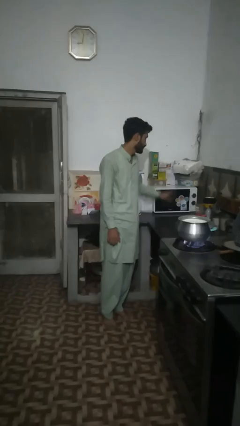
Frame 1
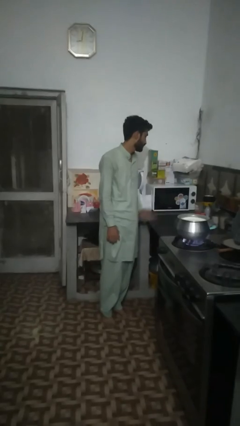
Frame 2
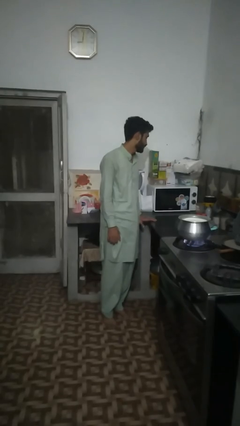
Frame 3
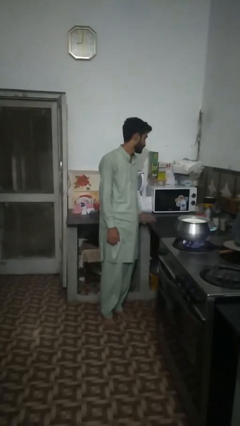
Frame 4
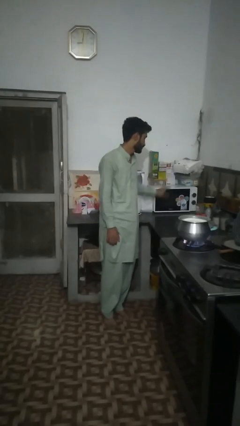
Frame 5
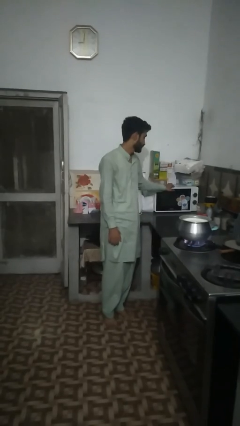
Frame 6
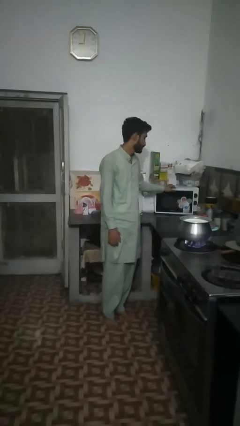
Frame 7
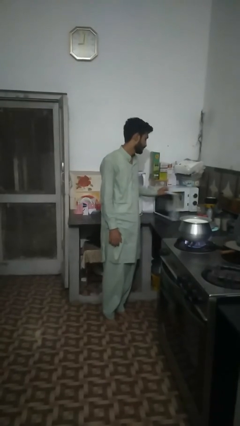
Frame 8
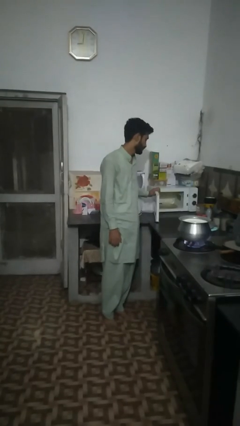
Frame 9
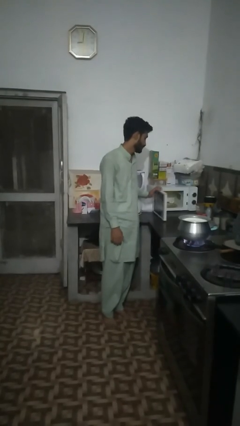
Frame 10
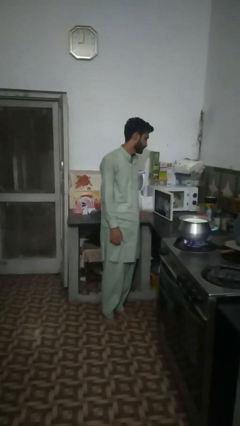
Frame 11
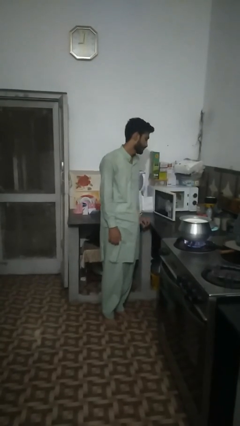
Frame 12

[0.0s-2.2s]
person opens microwave

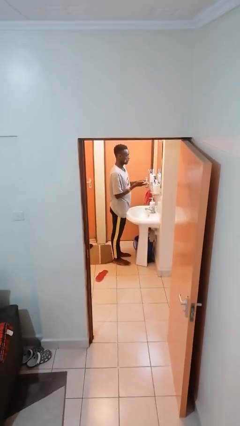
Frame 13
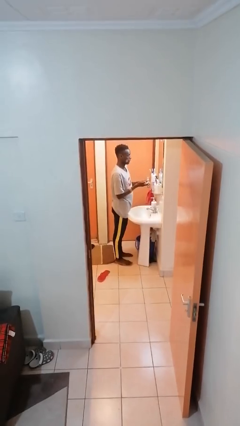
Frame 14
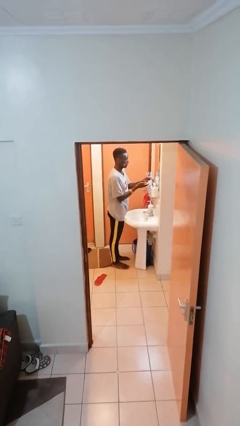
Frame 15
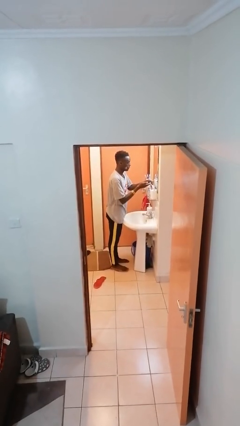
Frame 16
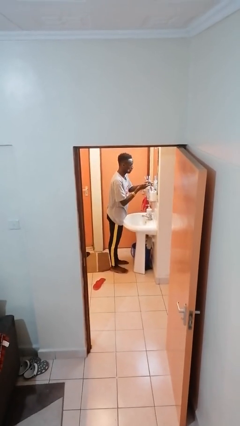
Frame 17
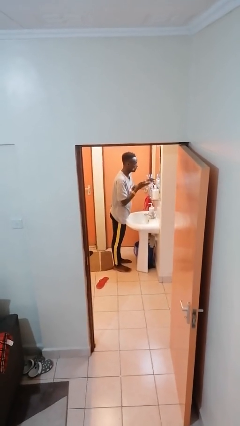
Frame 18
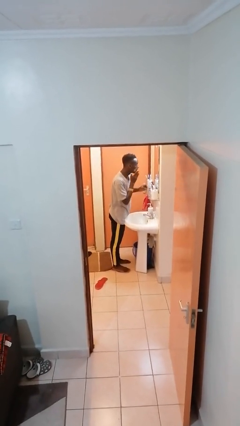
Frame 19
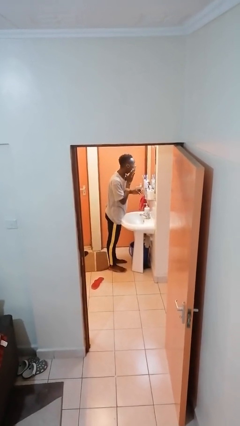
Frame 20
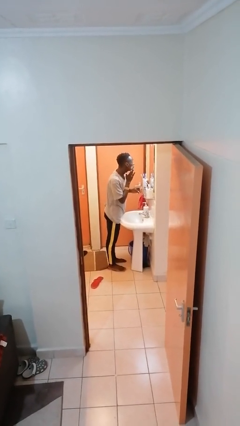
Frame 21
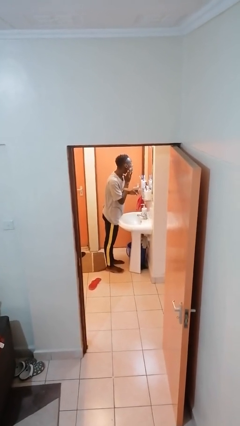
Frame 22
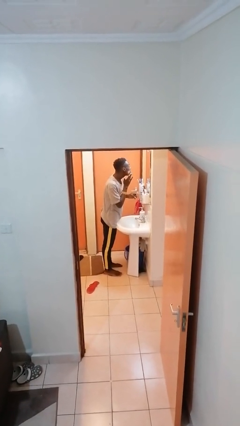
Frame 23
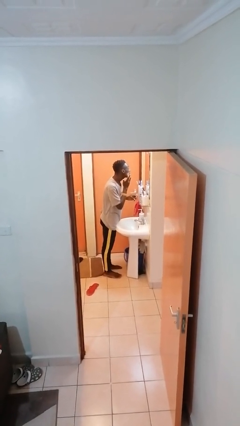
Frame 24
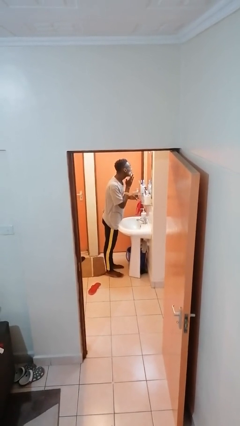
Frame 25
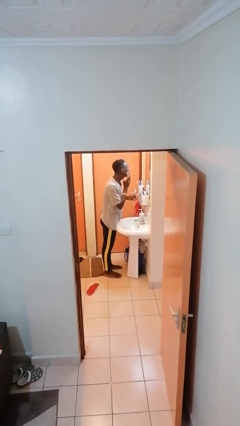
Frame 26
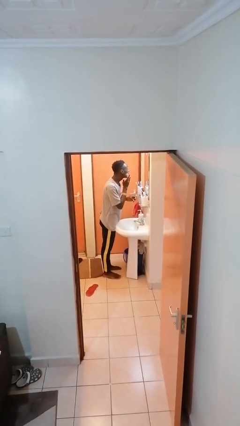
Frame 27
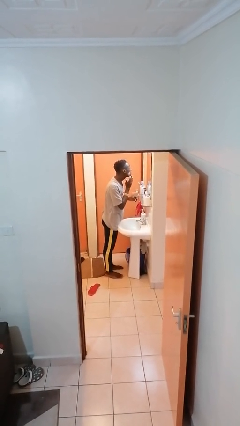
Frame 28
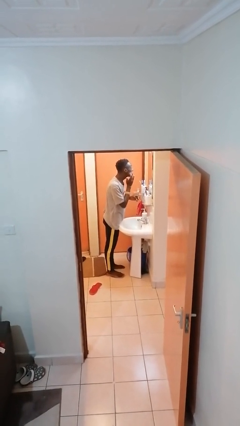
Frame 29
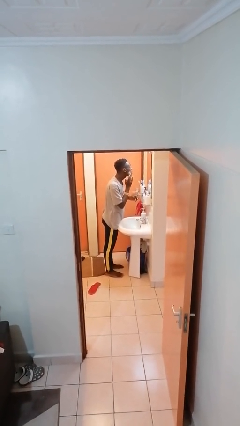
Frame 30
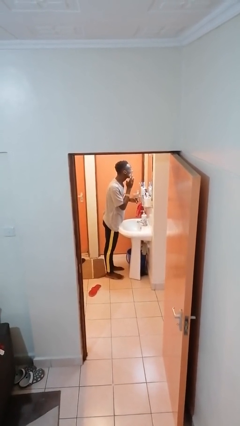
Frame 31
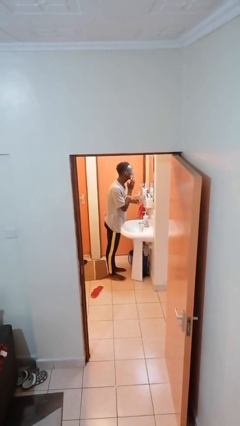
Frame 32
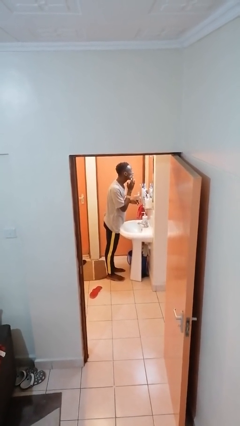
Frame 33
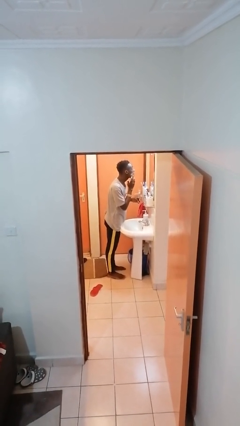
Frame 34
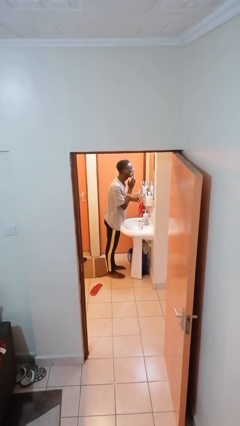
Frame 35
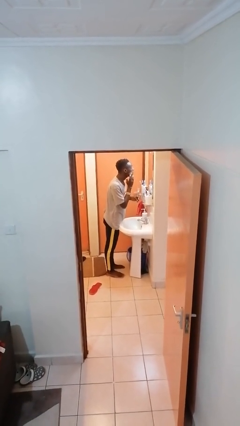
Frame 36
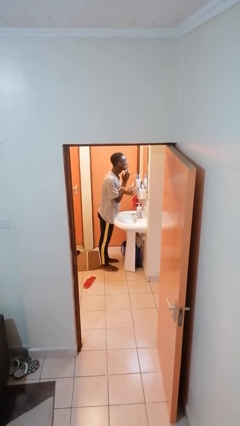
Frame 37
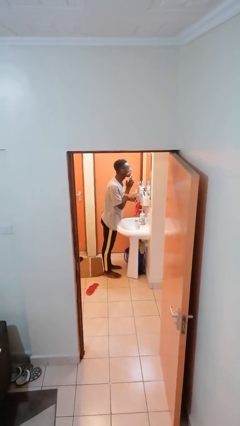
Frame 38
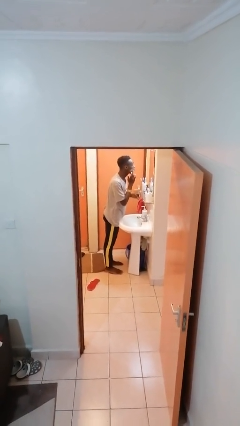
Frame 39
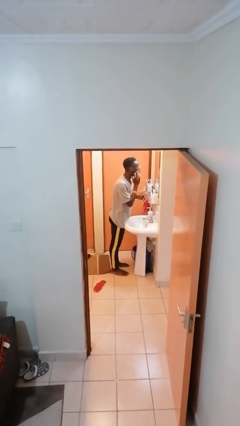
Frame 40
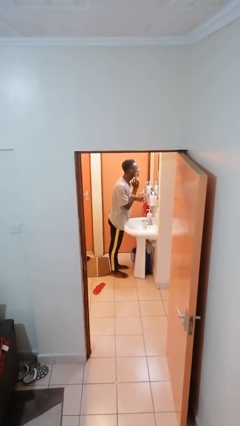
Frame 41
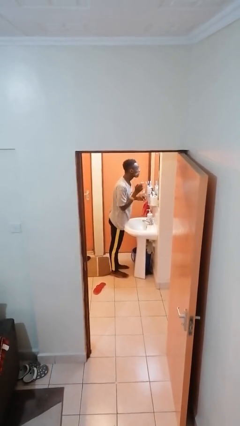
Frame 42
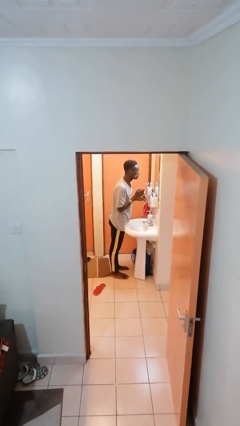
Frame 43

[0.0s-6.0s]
person applies shaving cream

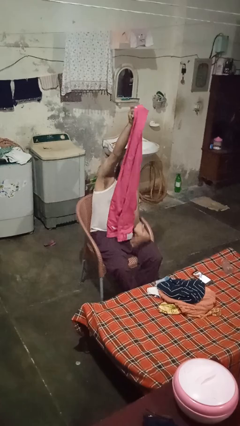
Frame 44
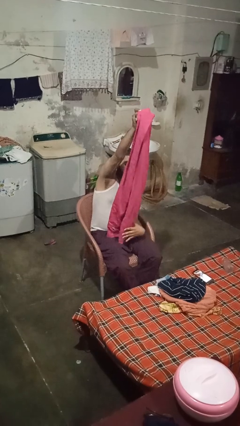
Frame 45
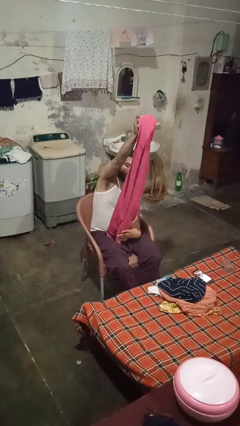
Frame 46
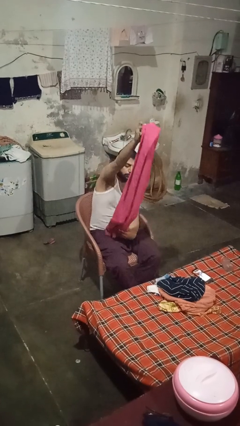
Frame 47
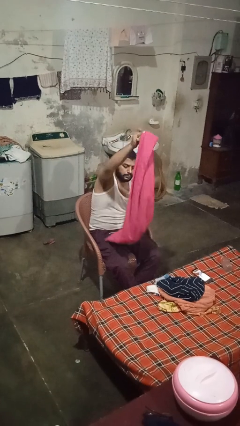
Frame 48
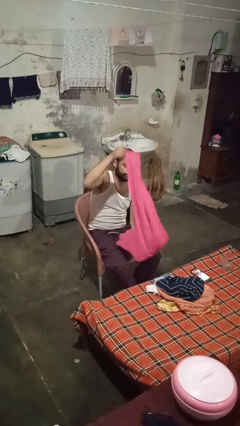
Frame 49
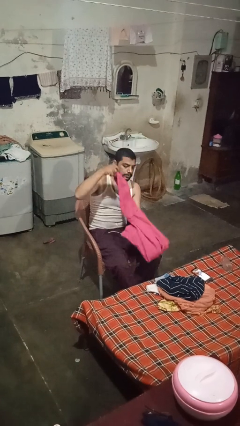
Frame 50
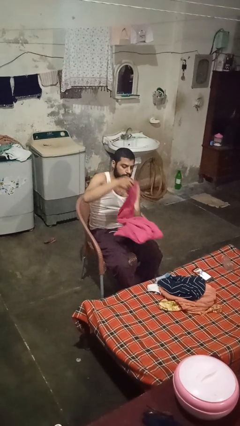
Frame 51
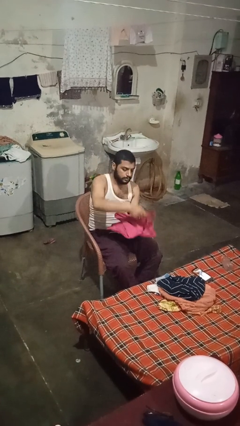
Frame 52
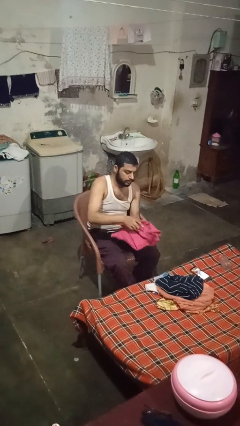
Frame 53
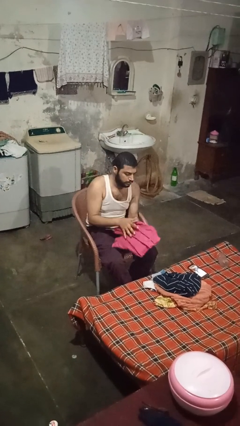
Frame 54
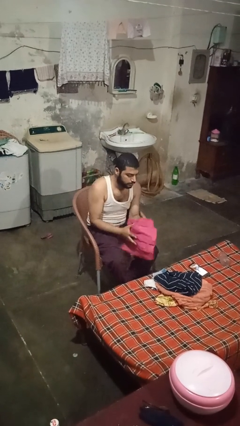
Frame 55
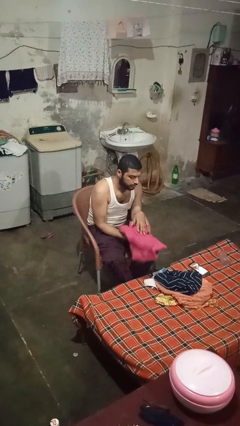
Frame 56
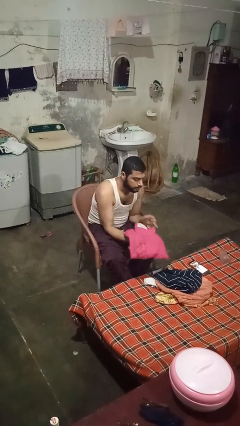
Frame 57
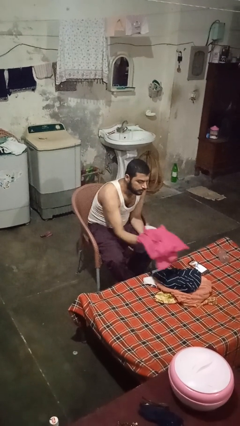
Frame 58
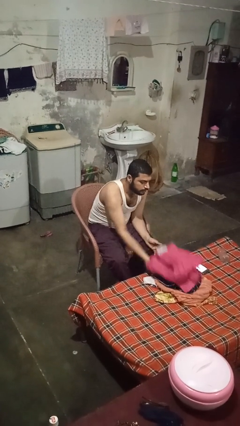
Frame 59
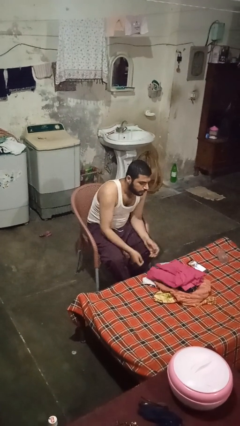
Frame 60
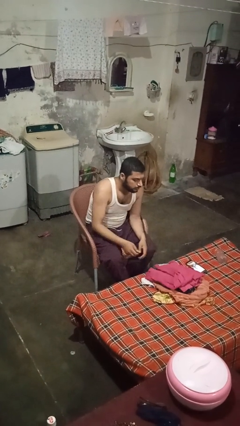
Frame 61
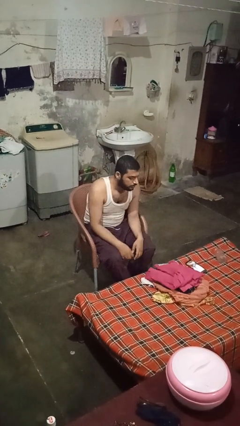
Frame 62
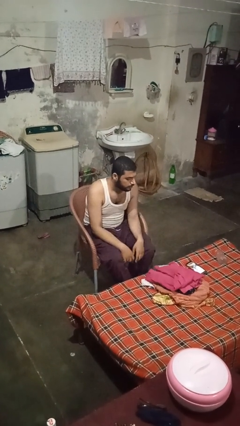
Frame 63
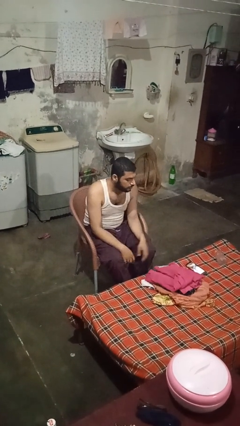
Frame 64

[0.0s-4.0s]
person folds pants

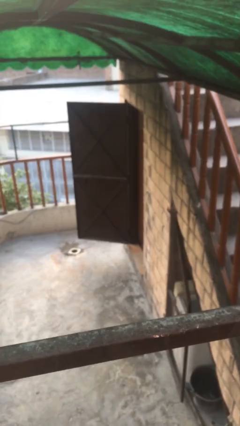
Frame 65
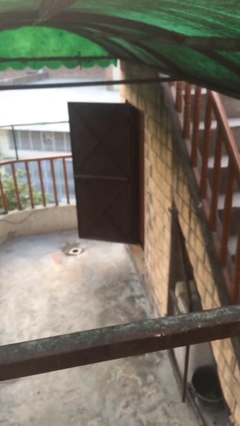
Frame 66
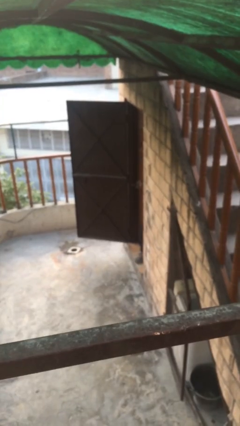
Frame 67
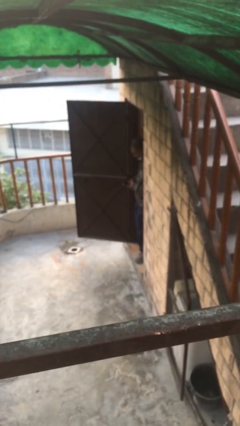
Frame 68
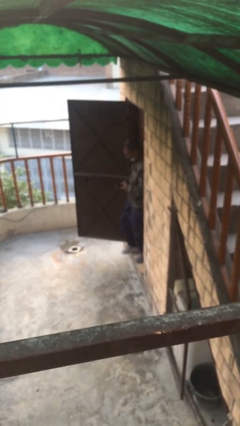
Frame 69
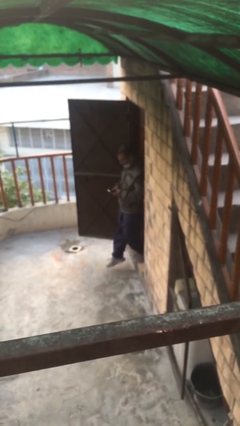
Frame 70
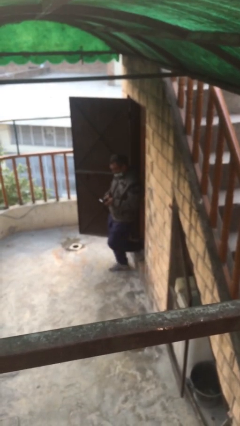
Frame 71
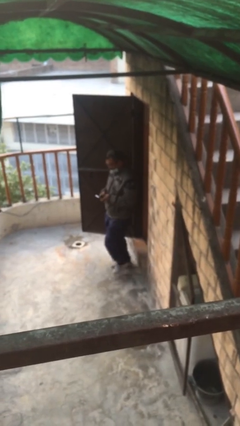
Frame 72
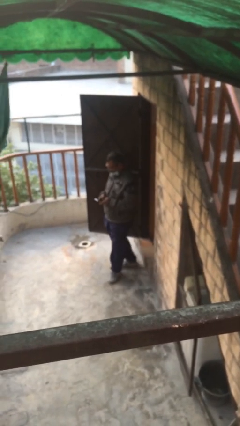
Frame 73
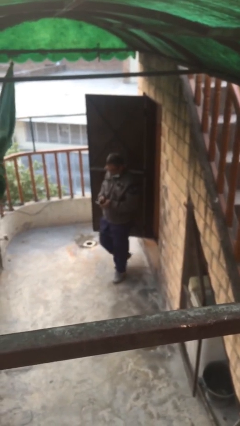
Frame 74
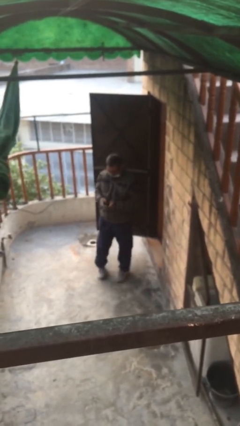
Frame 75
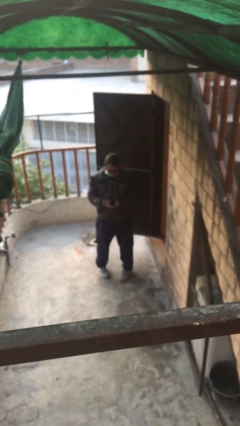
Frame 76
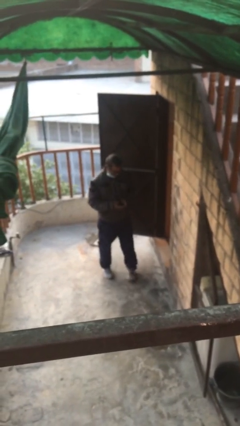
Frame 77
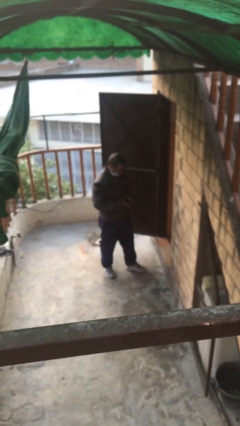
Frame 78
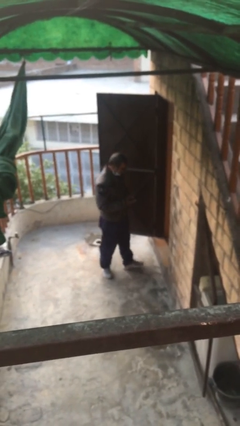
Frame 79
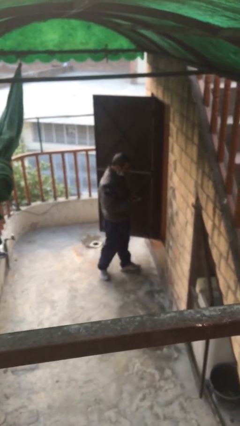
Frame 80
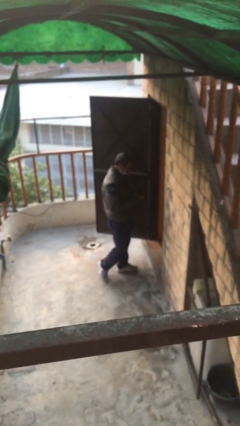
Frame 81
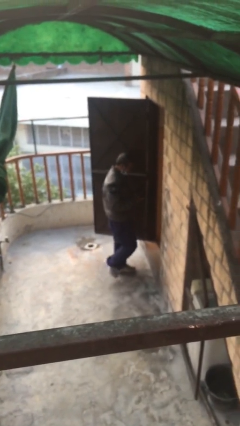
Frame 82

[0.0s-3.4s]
person enters scene through structure

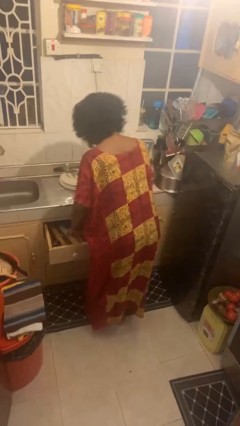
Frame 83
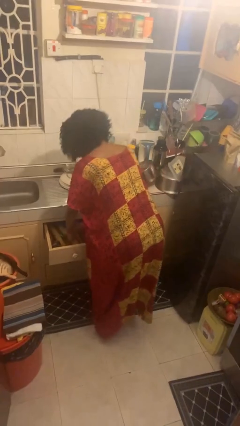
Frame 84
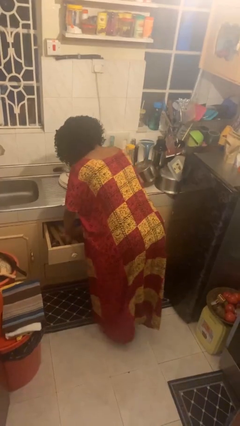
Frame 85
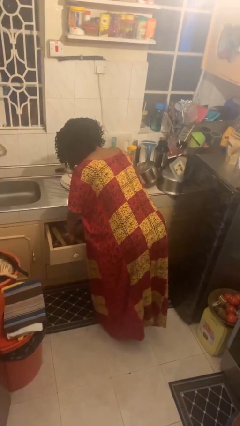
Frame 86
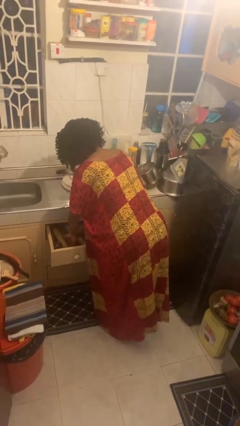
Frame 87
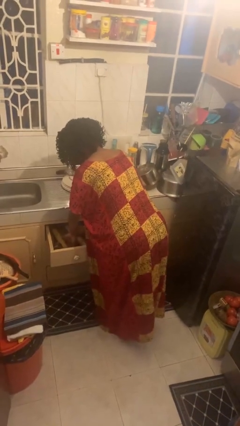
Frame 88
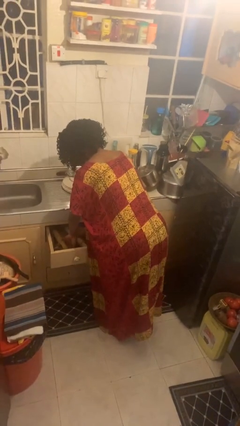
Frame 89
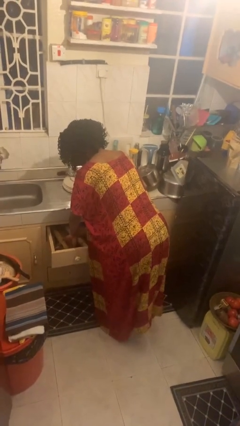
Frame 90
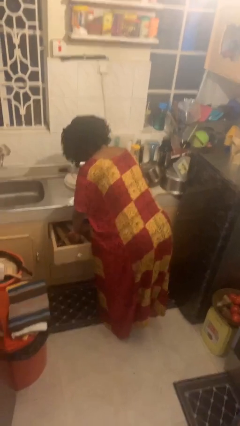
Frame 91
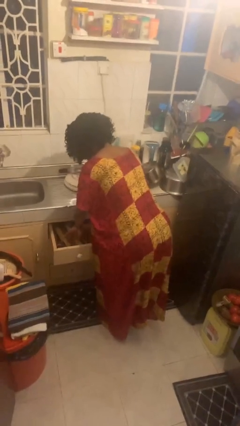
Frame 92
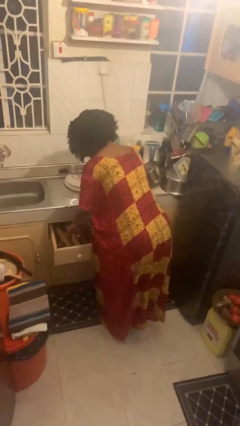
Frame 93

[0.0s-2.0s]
person searches in kitchen drawer
